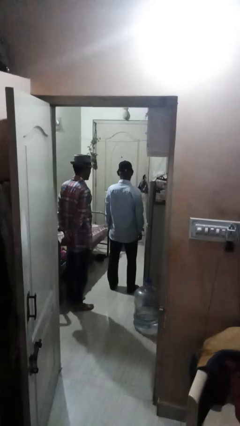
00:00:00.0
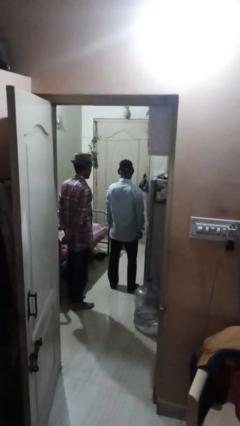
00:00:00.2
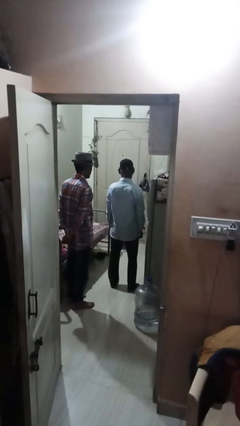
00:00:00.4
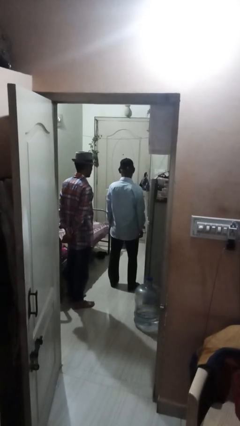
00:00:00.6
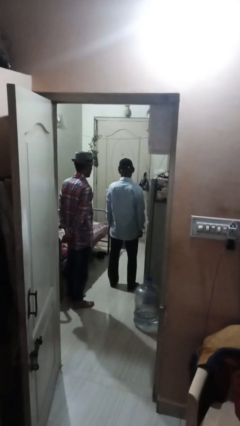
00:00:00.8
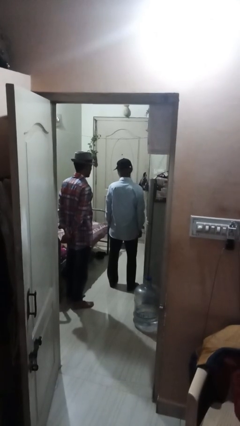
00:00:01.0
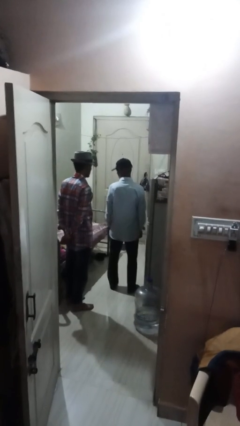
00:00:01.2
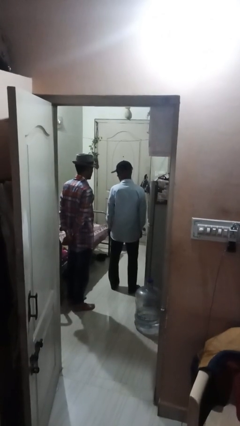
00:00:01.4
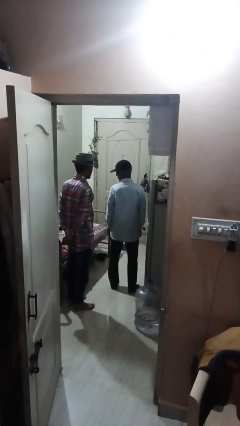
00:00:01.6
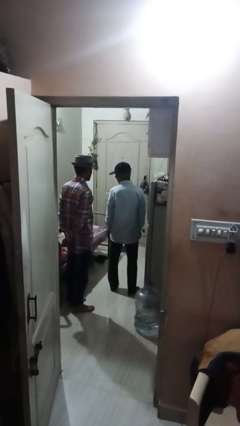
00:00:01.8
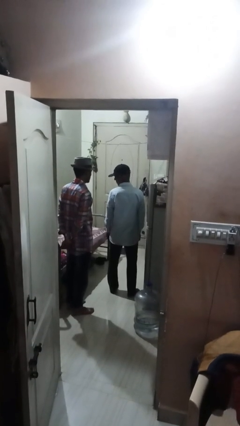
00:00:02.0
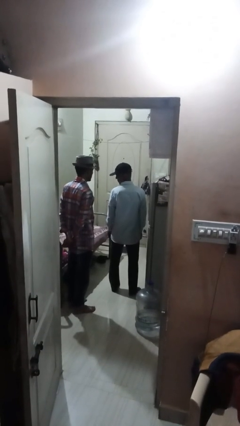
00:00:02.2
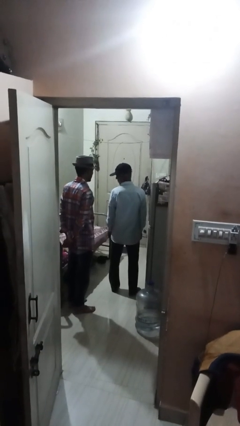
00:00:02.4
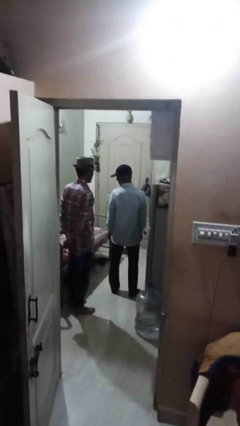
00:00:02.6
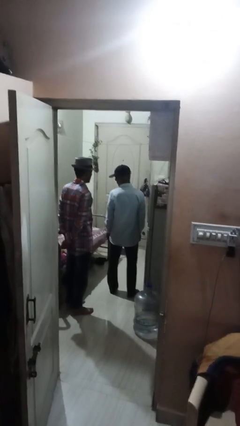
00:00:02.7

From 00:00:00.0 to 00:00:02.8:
person looks over shoulder

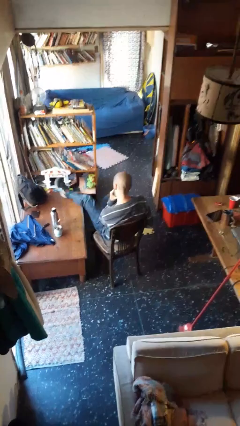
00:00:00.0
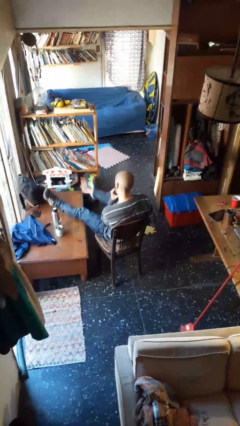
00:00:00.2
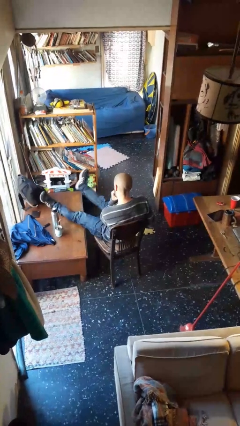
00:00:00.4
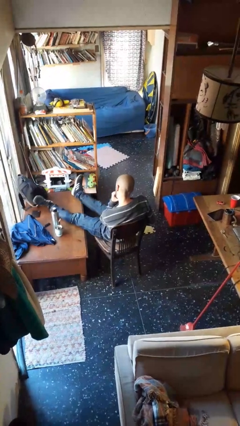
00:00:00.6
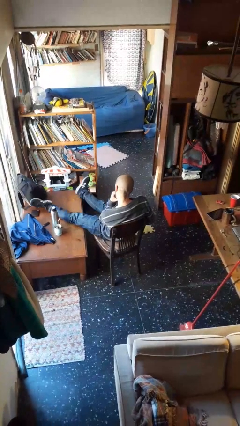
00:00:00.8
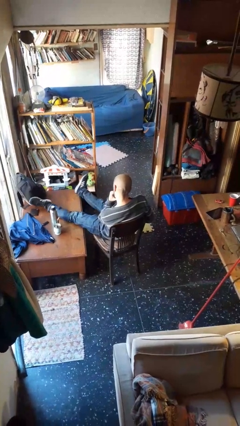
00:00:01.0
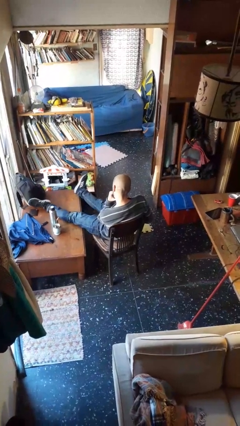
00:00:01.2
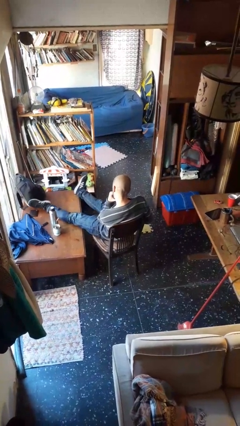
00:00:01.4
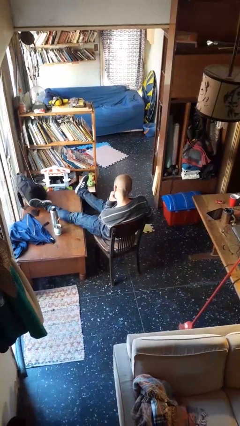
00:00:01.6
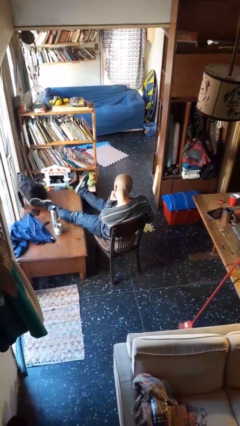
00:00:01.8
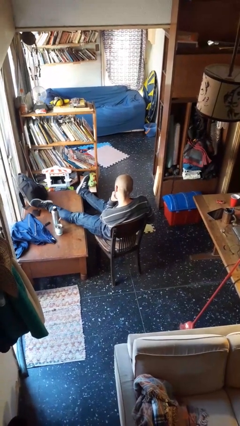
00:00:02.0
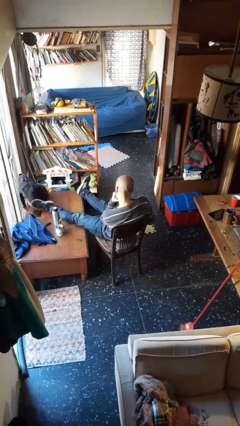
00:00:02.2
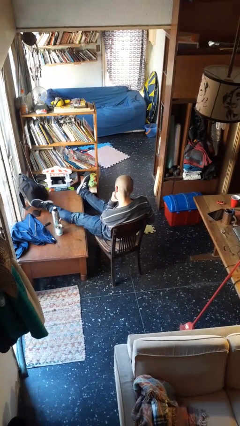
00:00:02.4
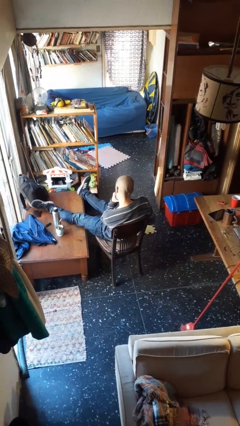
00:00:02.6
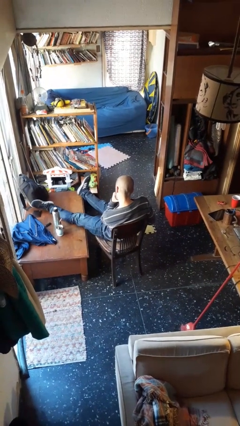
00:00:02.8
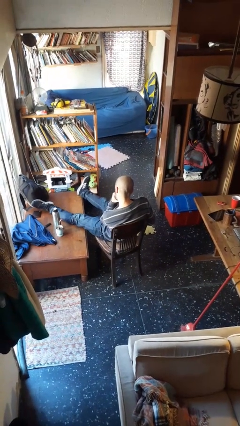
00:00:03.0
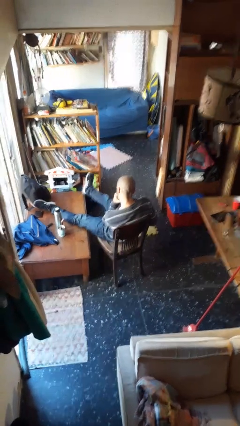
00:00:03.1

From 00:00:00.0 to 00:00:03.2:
person puts feet up

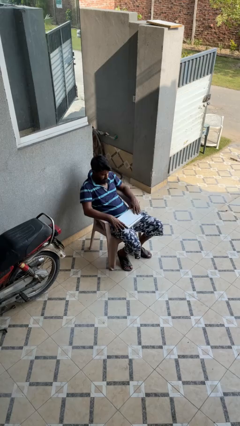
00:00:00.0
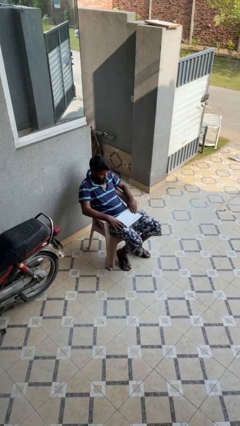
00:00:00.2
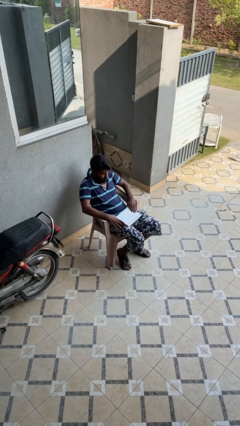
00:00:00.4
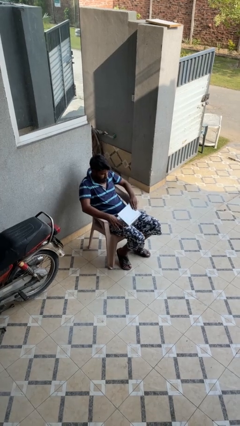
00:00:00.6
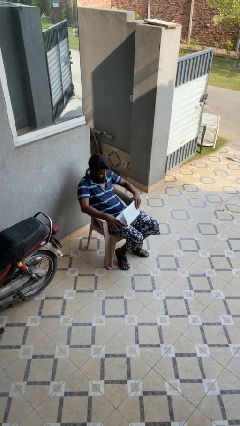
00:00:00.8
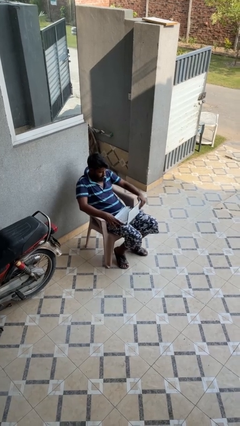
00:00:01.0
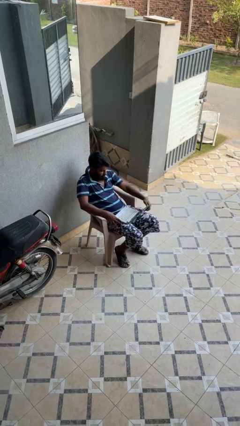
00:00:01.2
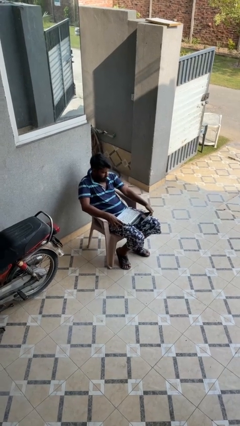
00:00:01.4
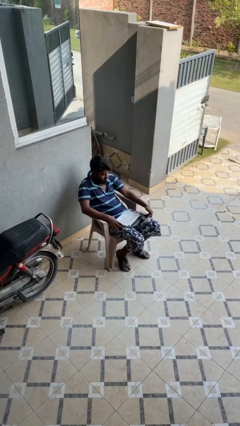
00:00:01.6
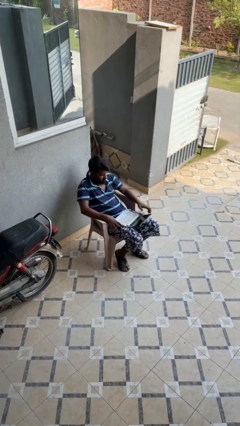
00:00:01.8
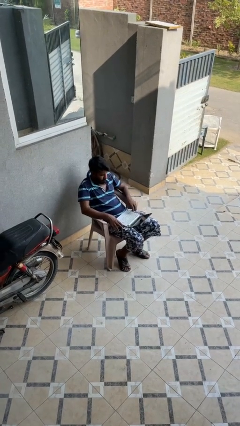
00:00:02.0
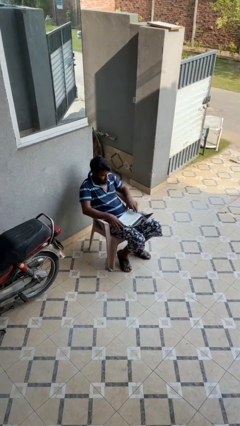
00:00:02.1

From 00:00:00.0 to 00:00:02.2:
person opens laptop

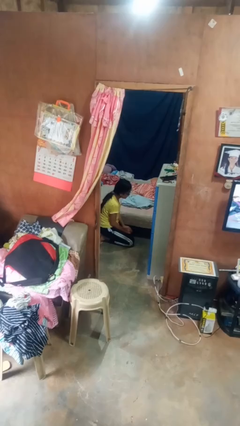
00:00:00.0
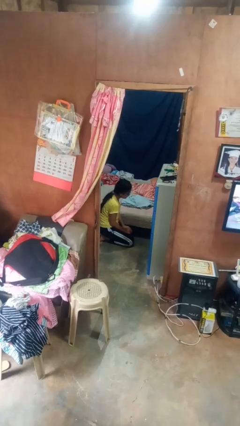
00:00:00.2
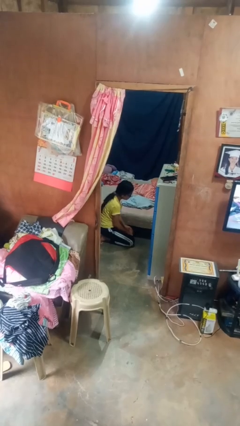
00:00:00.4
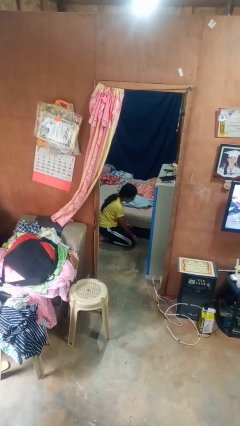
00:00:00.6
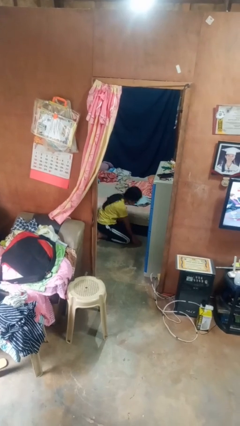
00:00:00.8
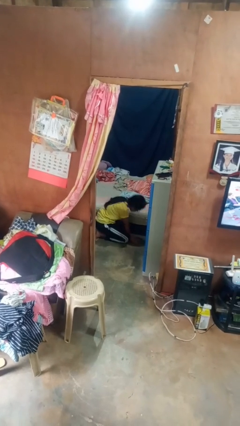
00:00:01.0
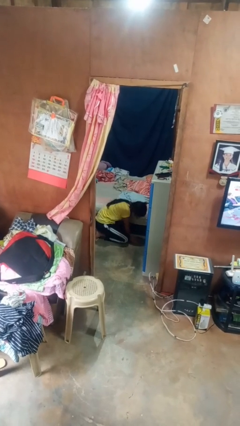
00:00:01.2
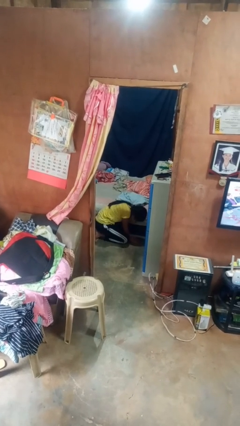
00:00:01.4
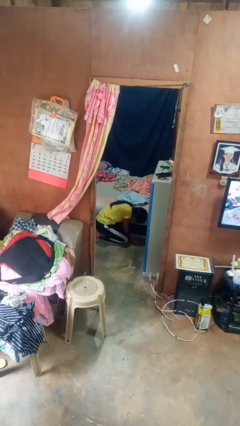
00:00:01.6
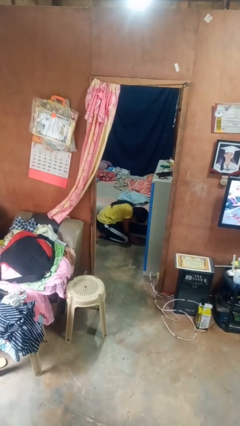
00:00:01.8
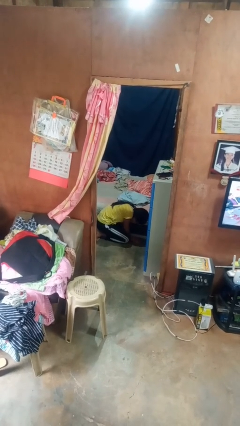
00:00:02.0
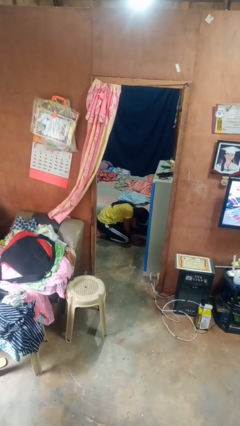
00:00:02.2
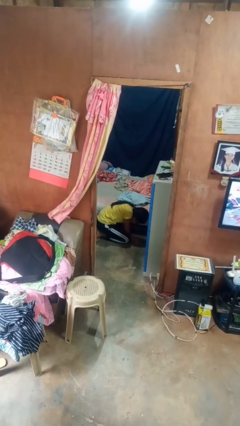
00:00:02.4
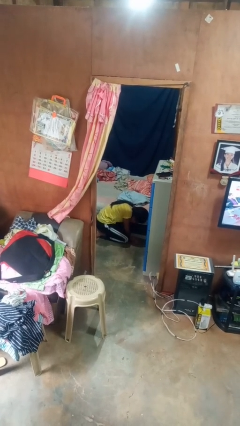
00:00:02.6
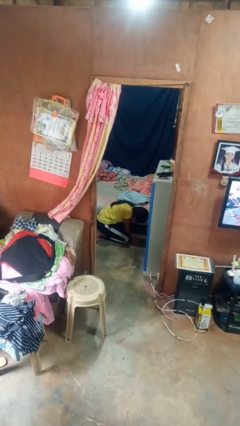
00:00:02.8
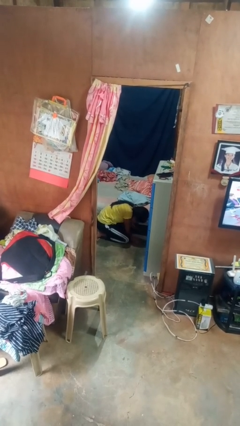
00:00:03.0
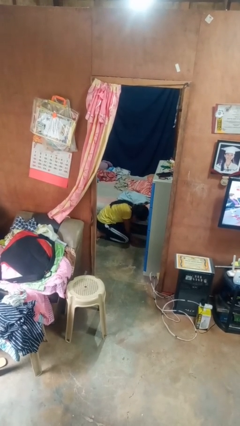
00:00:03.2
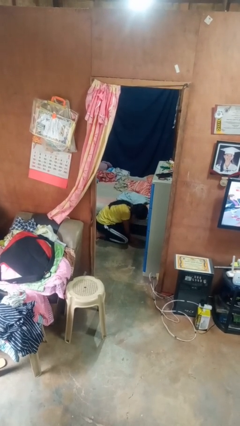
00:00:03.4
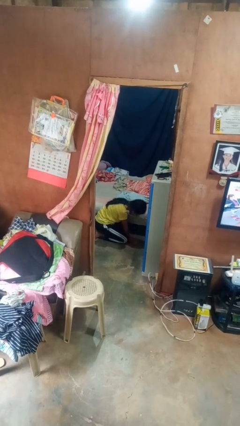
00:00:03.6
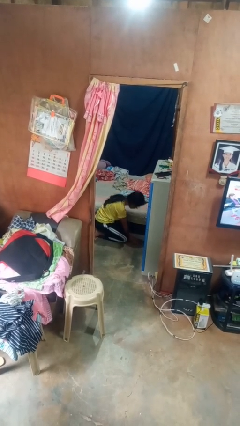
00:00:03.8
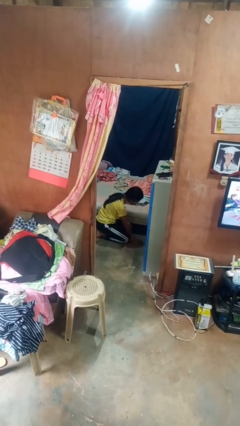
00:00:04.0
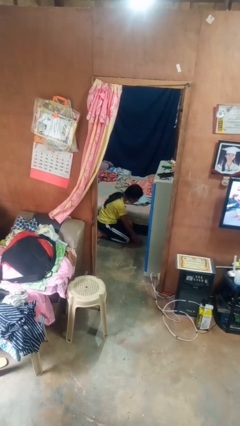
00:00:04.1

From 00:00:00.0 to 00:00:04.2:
person searches under bed

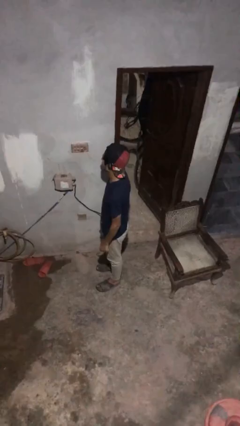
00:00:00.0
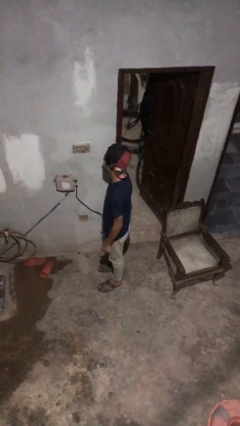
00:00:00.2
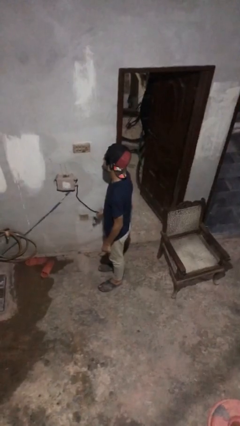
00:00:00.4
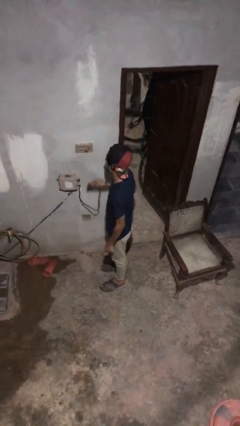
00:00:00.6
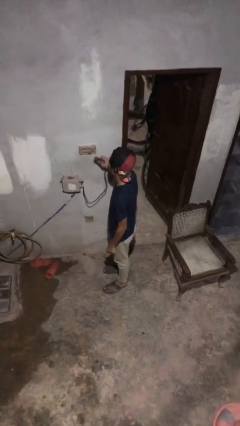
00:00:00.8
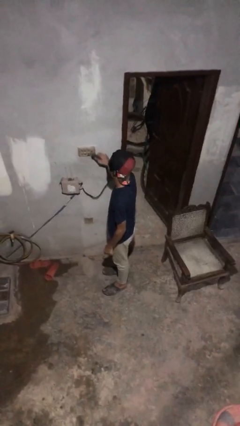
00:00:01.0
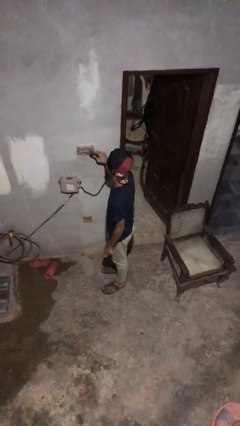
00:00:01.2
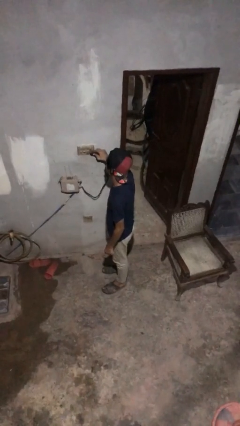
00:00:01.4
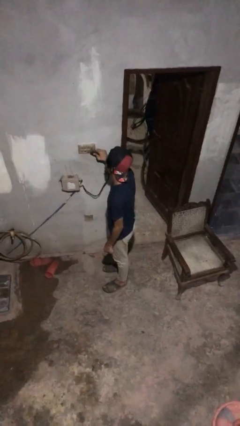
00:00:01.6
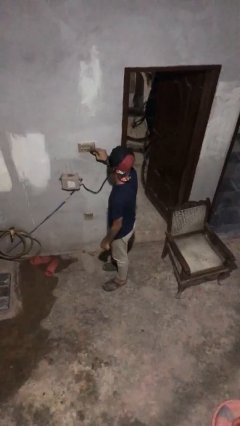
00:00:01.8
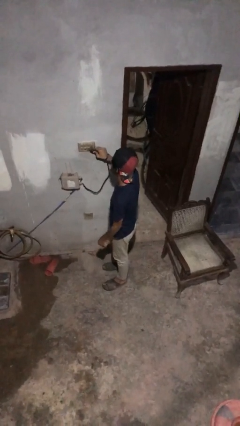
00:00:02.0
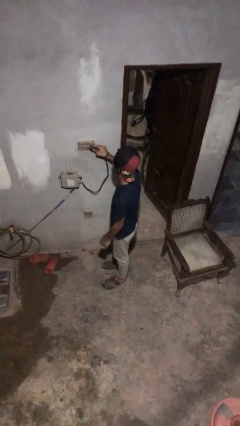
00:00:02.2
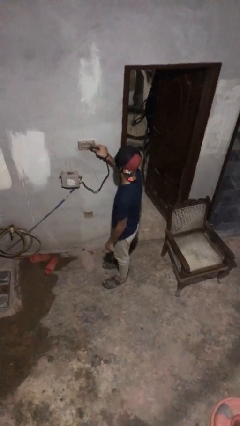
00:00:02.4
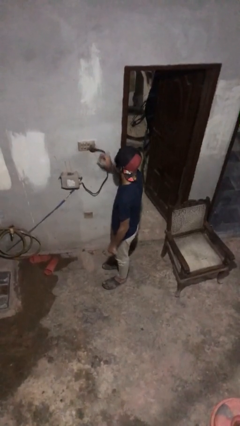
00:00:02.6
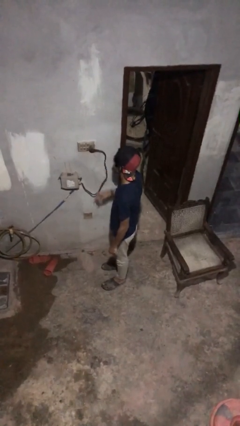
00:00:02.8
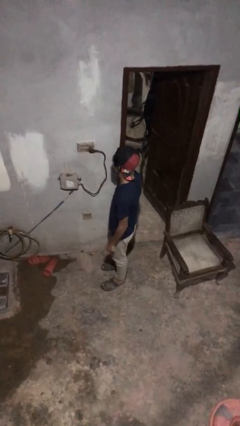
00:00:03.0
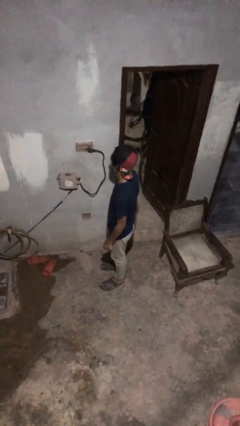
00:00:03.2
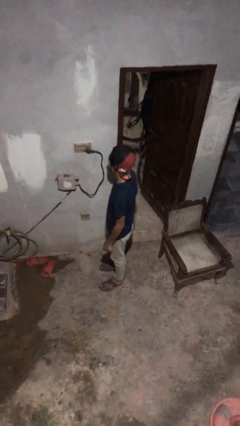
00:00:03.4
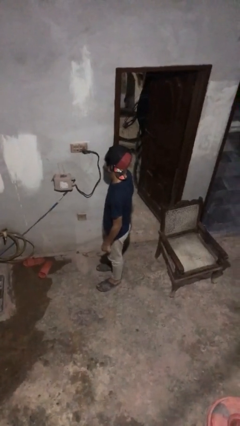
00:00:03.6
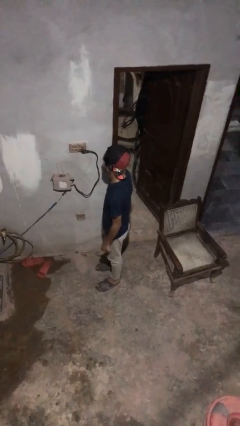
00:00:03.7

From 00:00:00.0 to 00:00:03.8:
person plugs into electrical socket

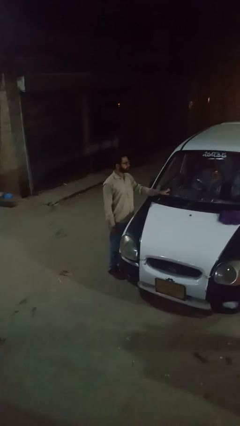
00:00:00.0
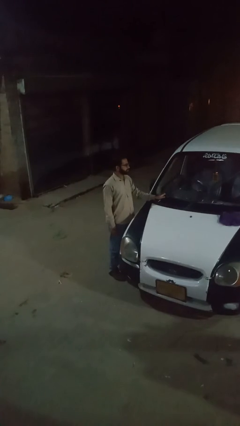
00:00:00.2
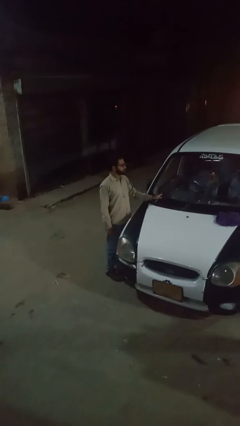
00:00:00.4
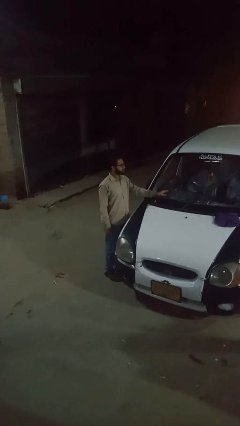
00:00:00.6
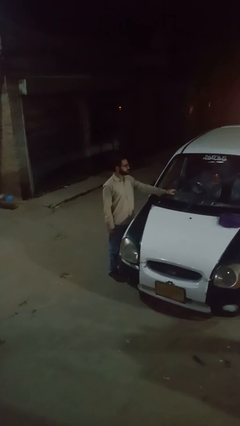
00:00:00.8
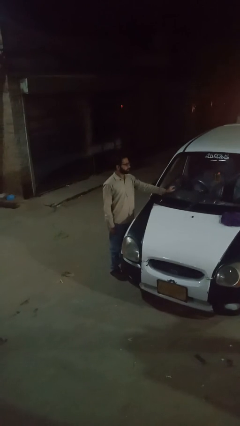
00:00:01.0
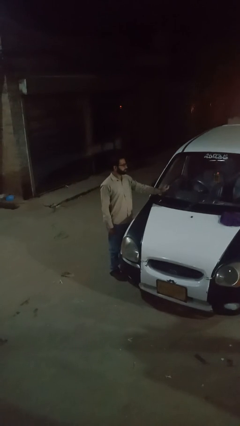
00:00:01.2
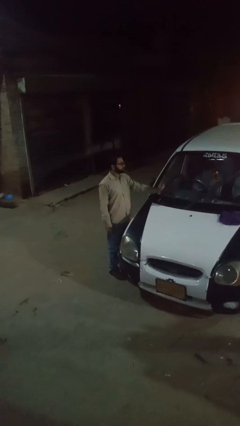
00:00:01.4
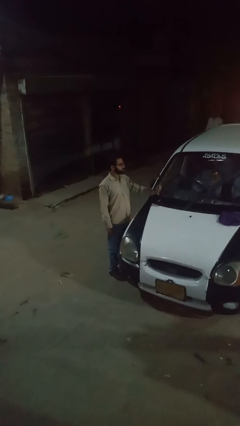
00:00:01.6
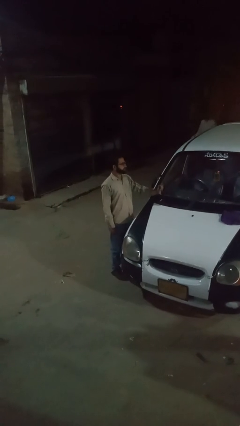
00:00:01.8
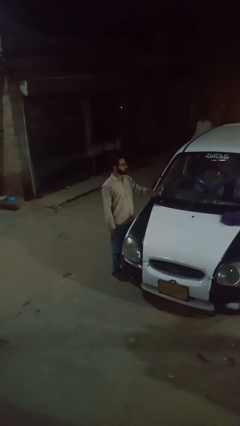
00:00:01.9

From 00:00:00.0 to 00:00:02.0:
person flips up car wipers
